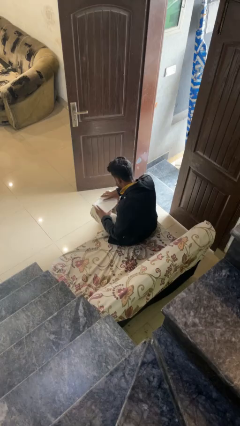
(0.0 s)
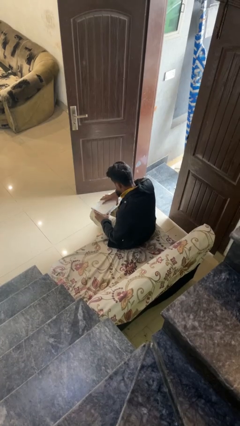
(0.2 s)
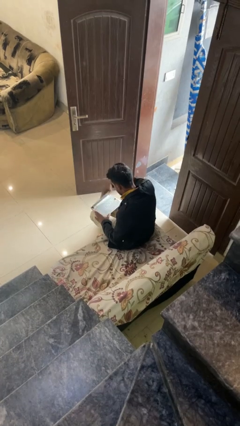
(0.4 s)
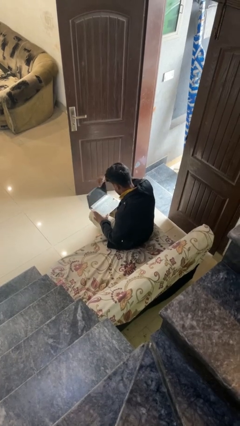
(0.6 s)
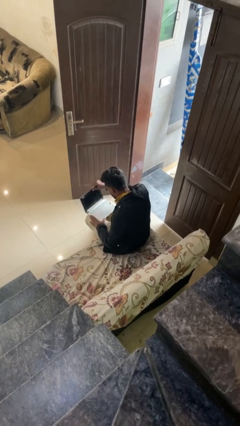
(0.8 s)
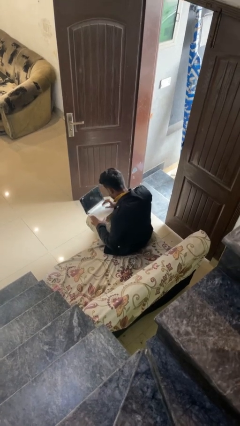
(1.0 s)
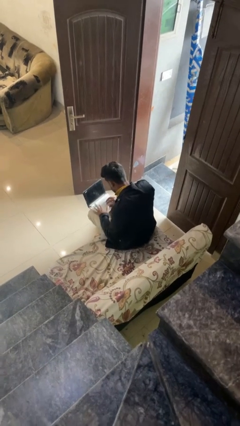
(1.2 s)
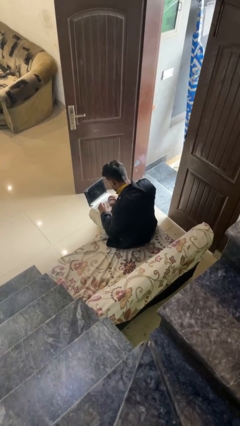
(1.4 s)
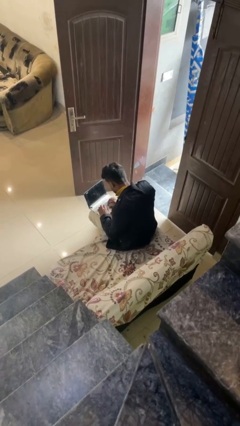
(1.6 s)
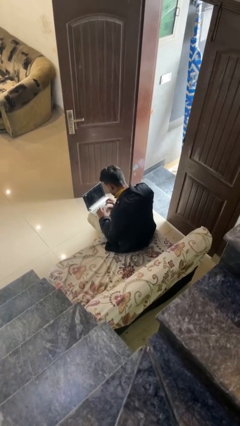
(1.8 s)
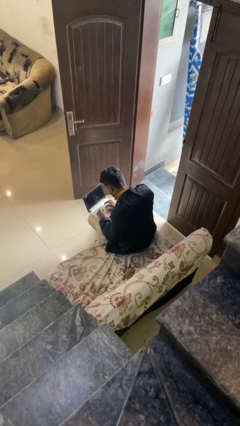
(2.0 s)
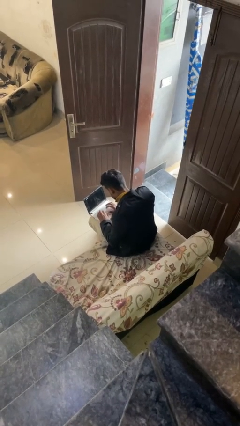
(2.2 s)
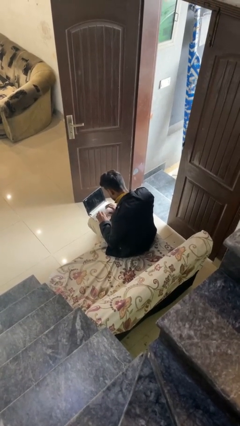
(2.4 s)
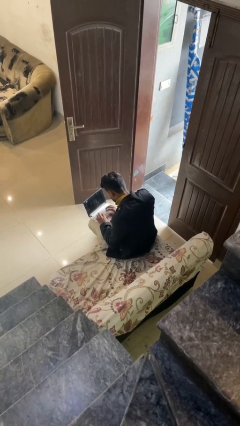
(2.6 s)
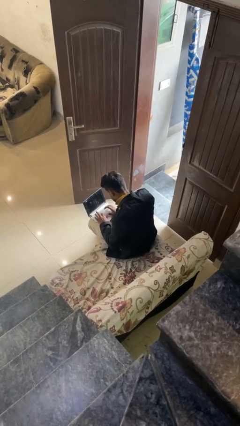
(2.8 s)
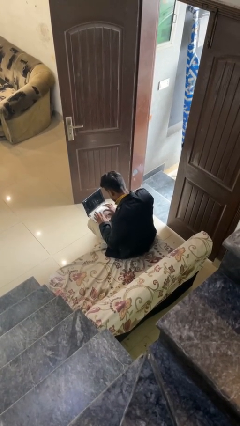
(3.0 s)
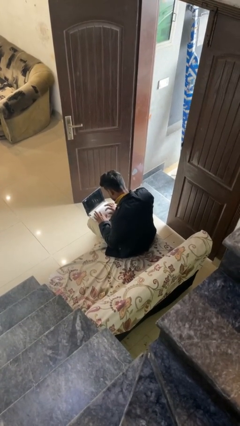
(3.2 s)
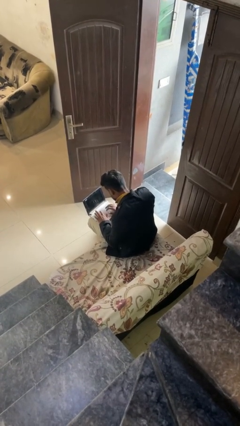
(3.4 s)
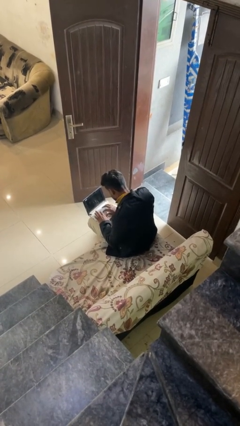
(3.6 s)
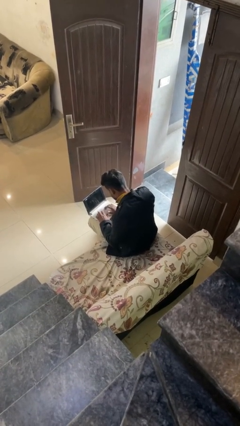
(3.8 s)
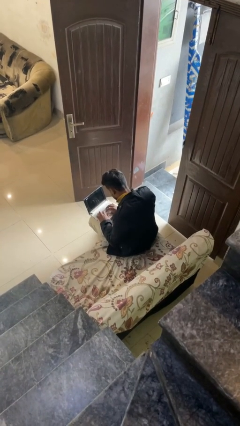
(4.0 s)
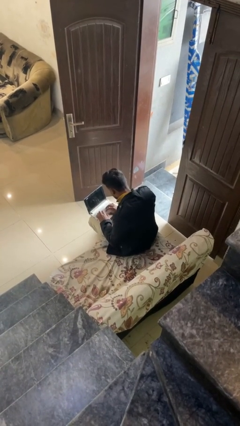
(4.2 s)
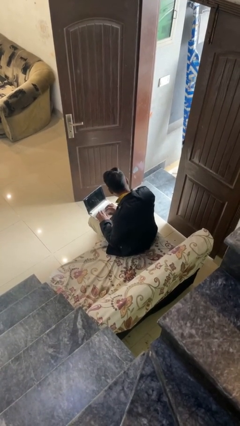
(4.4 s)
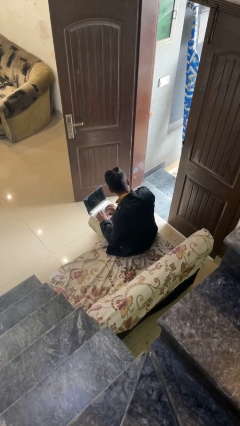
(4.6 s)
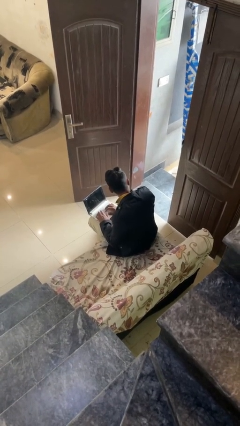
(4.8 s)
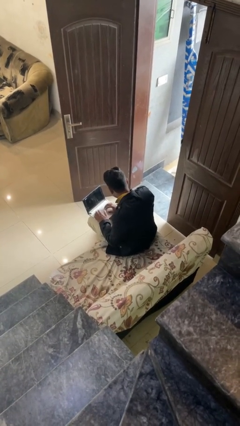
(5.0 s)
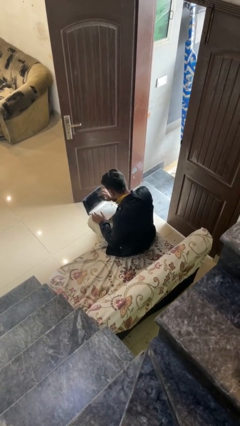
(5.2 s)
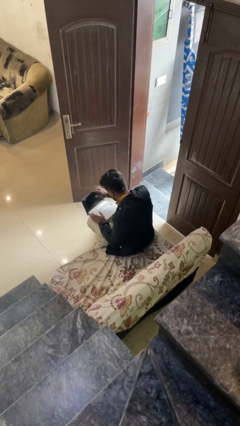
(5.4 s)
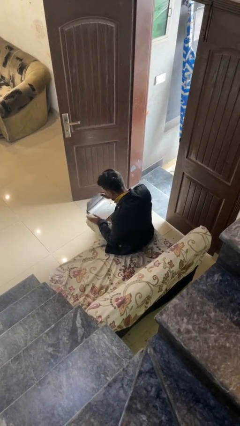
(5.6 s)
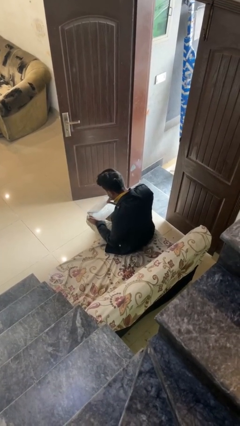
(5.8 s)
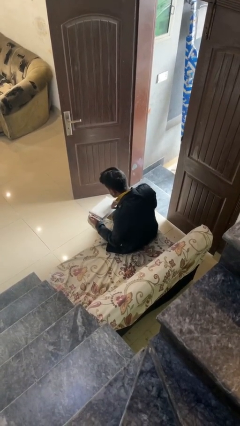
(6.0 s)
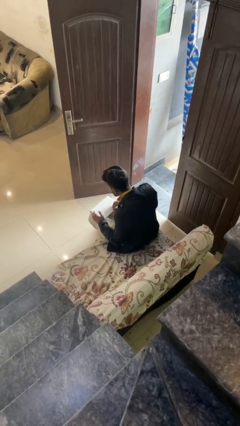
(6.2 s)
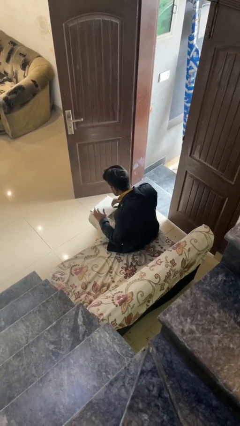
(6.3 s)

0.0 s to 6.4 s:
person interacts with laptop

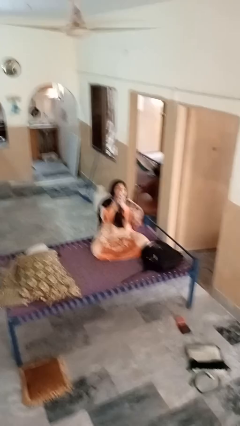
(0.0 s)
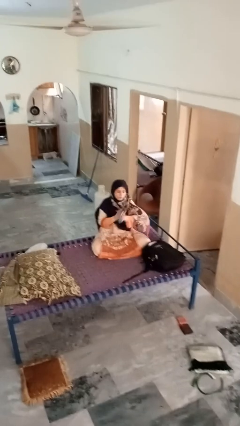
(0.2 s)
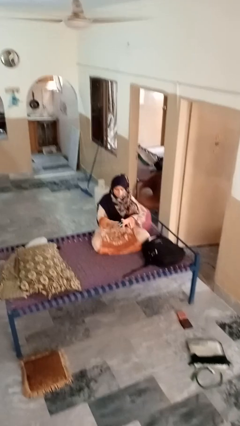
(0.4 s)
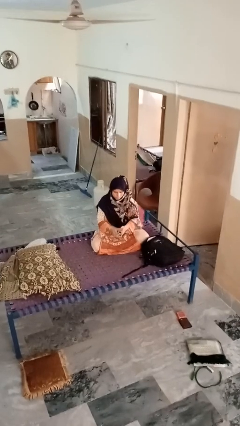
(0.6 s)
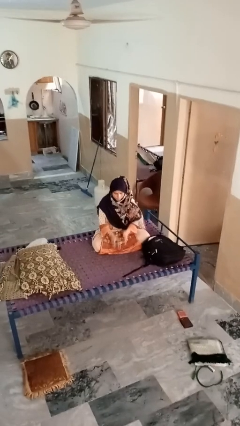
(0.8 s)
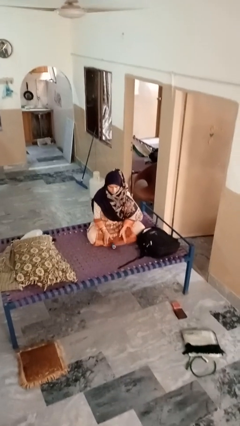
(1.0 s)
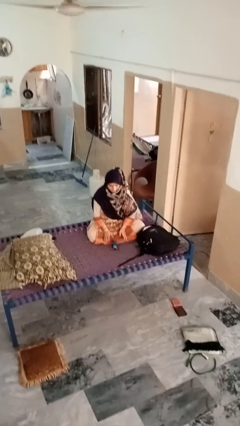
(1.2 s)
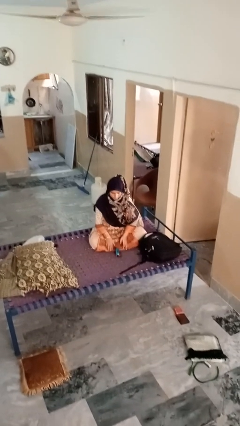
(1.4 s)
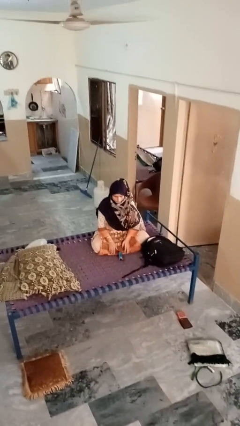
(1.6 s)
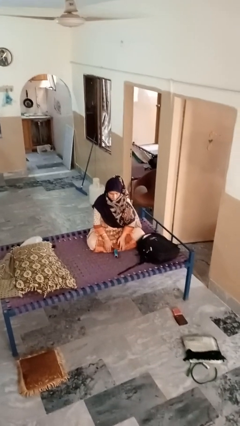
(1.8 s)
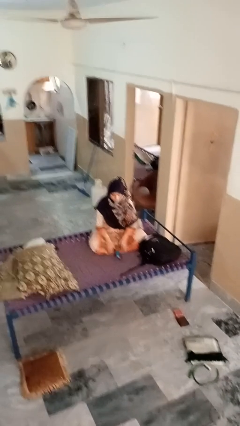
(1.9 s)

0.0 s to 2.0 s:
person catches dropped object

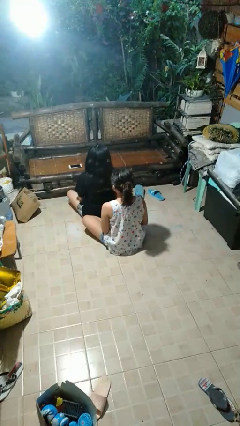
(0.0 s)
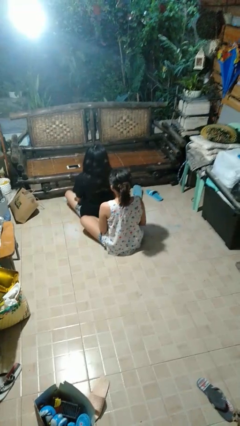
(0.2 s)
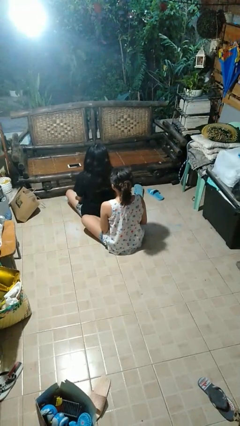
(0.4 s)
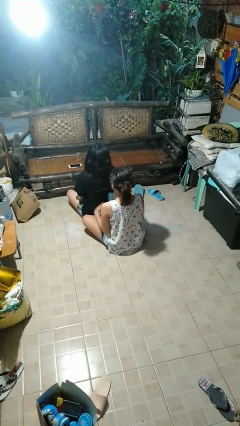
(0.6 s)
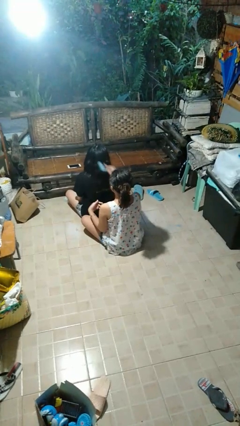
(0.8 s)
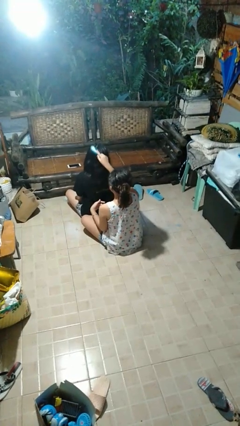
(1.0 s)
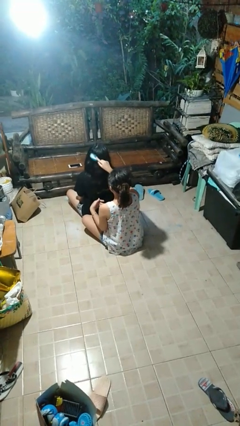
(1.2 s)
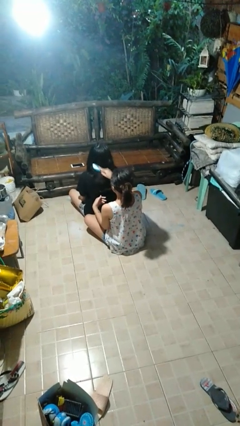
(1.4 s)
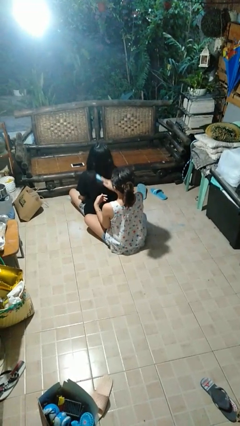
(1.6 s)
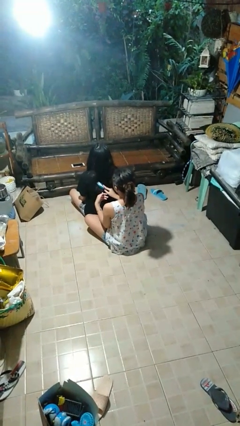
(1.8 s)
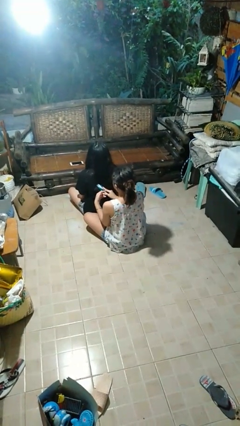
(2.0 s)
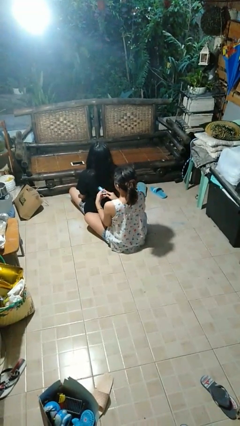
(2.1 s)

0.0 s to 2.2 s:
person brushes hair of person

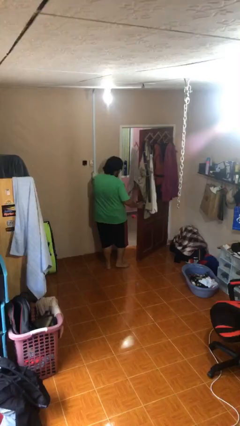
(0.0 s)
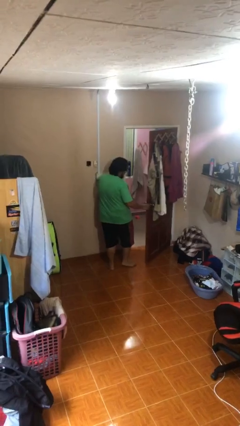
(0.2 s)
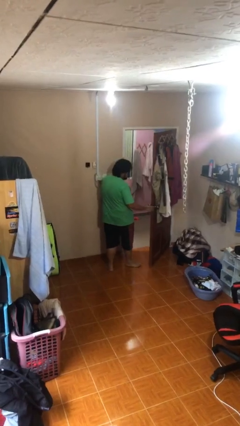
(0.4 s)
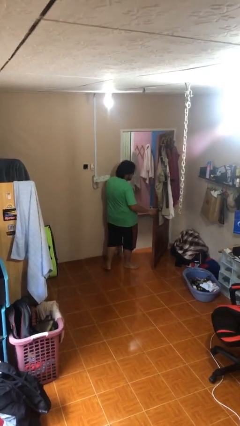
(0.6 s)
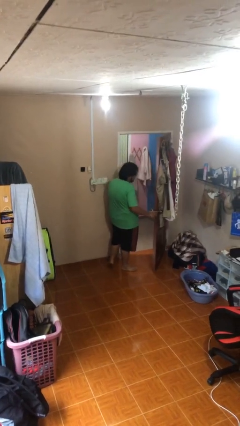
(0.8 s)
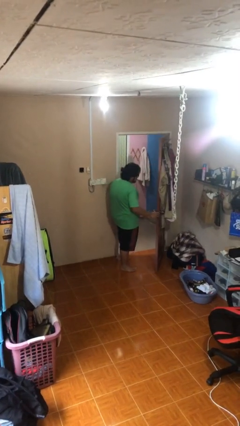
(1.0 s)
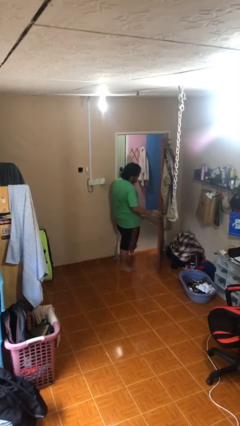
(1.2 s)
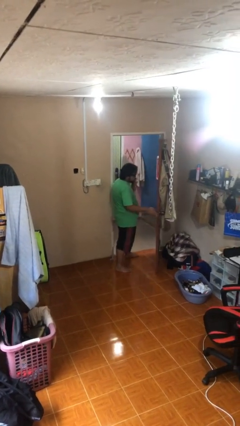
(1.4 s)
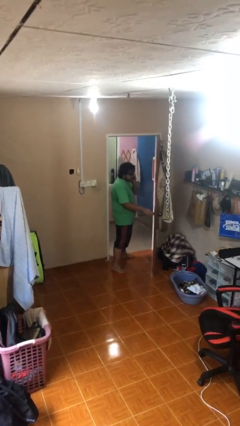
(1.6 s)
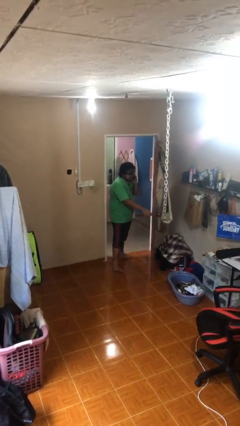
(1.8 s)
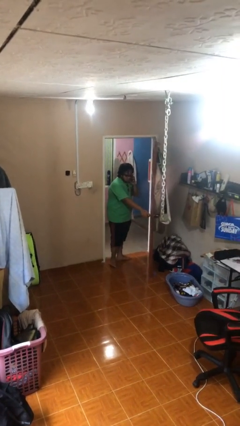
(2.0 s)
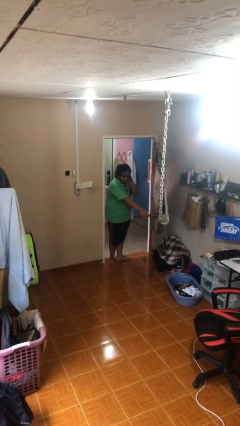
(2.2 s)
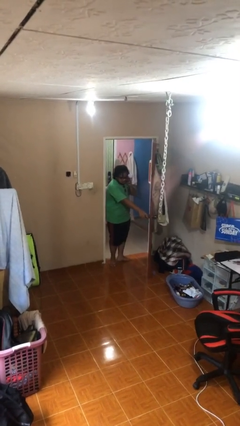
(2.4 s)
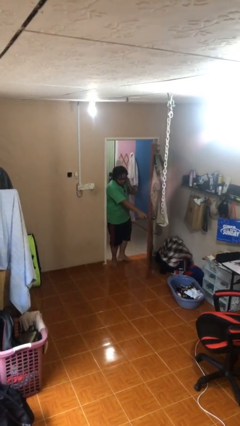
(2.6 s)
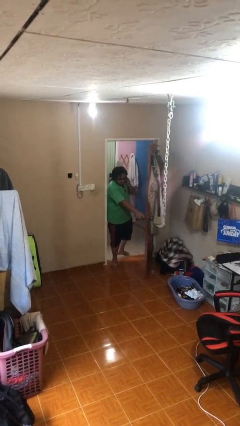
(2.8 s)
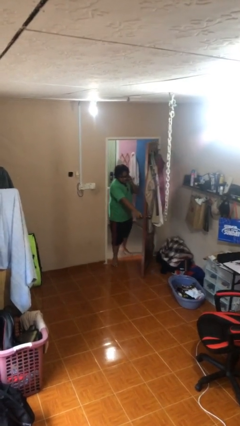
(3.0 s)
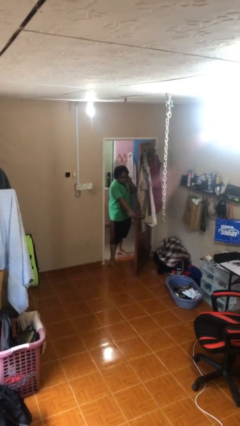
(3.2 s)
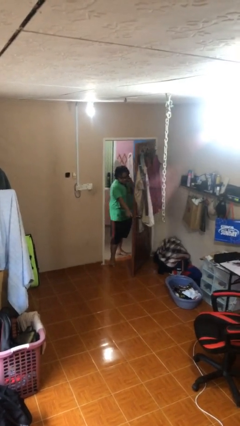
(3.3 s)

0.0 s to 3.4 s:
person exits scene through structure

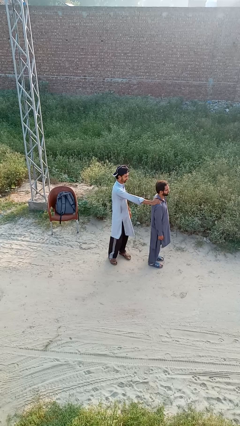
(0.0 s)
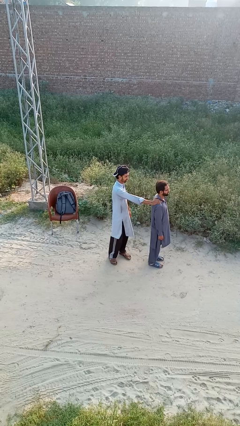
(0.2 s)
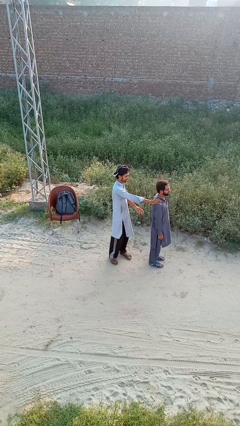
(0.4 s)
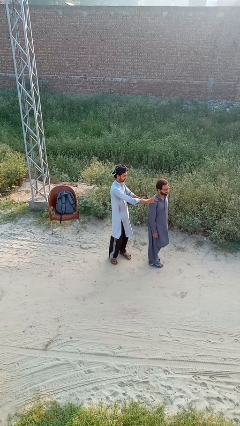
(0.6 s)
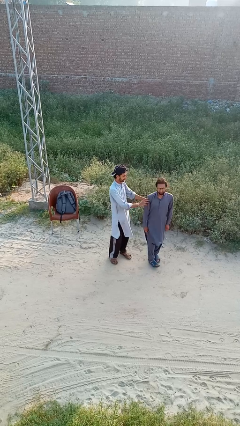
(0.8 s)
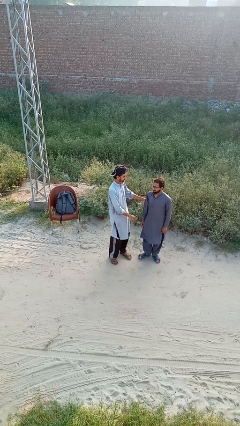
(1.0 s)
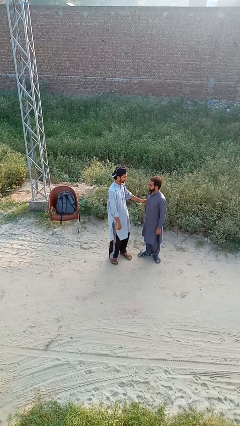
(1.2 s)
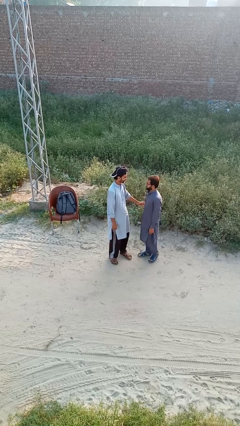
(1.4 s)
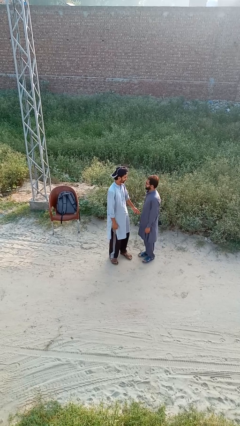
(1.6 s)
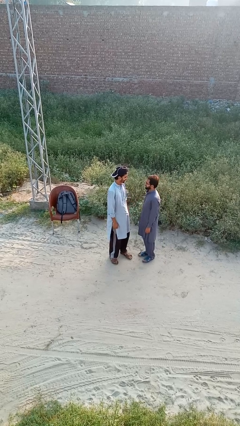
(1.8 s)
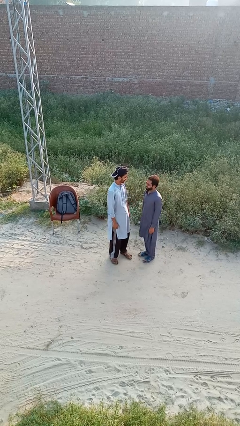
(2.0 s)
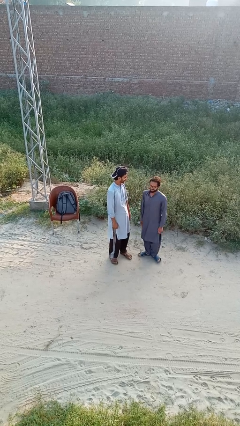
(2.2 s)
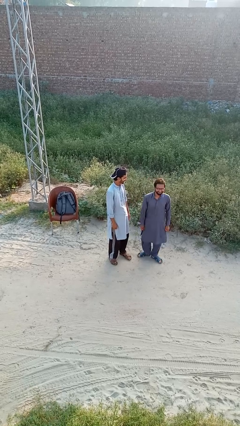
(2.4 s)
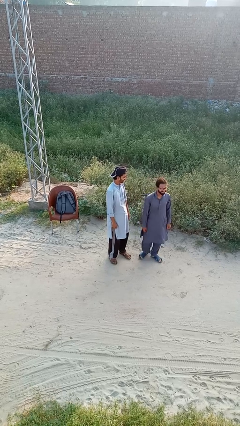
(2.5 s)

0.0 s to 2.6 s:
person spins person around

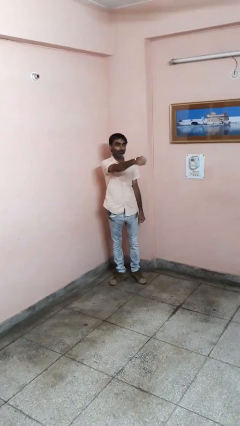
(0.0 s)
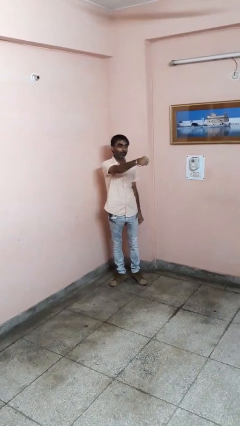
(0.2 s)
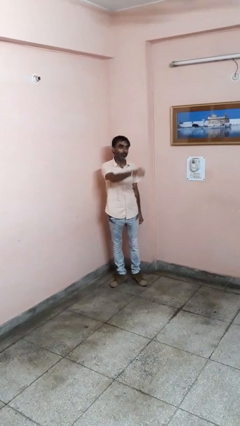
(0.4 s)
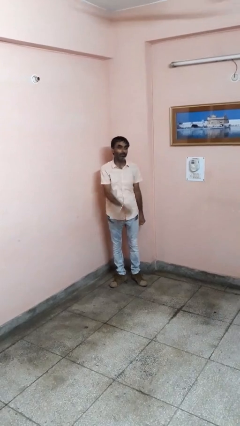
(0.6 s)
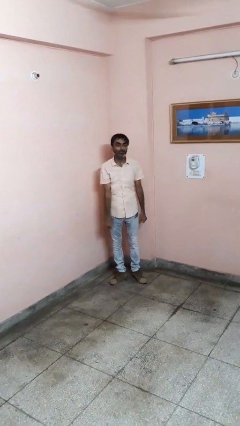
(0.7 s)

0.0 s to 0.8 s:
person punches

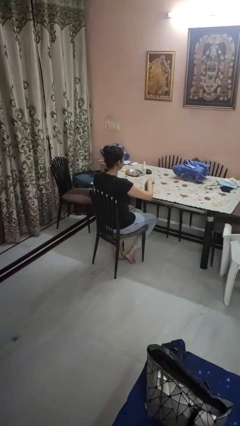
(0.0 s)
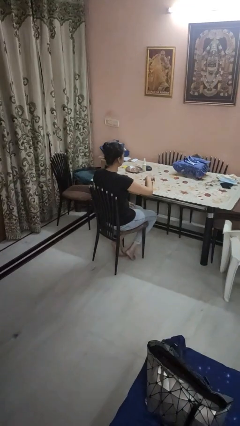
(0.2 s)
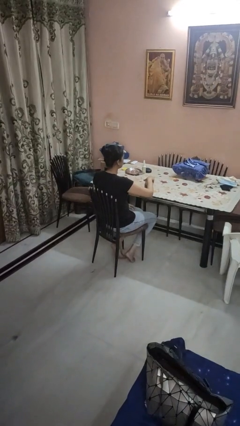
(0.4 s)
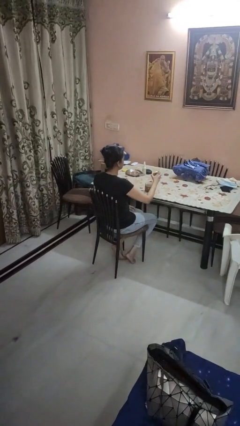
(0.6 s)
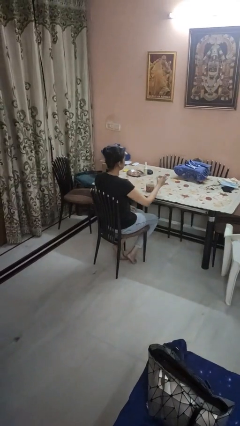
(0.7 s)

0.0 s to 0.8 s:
person opens jar
